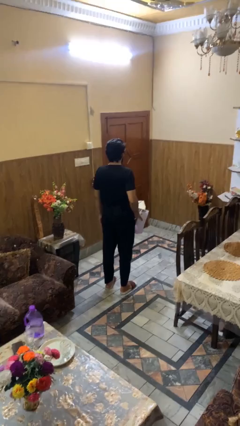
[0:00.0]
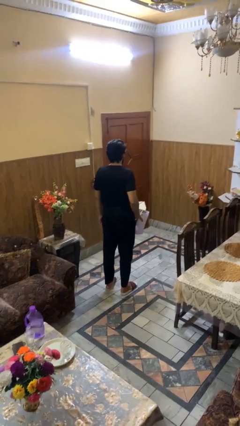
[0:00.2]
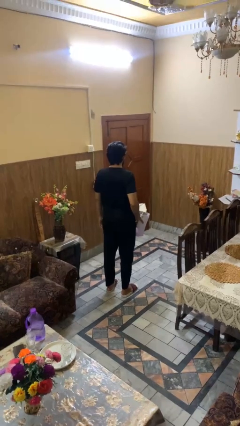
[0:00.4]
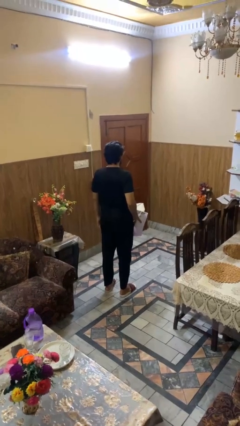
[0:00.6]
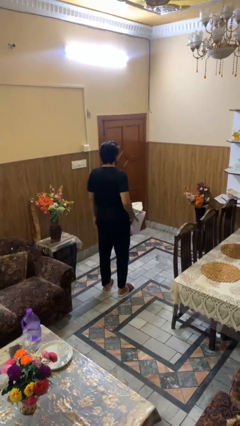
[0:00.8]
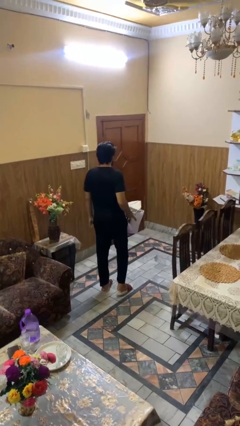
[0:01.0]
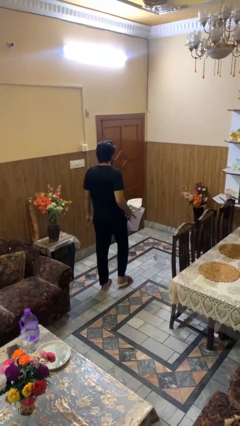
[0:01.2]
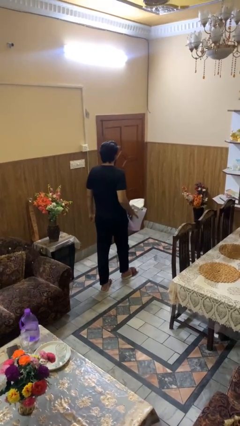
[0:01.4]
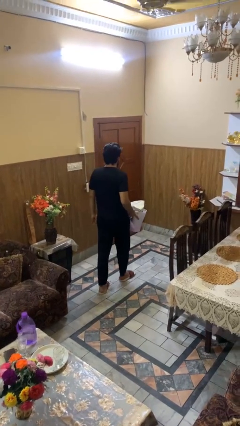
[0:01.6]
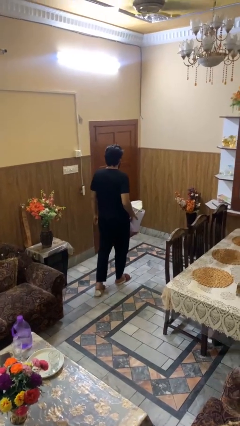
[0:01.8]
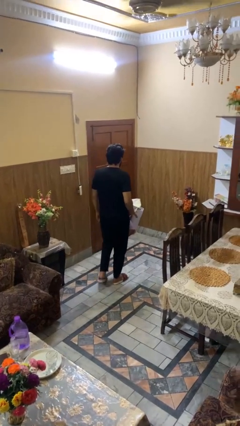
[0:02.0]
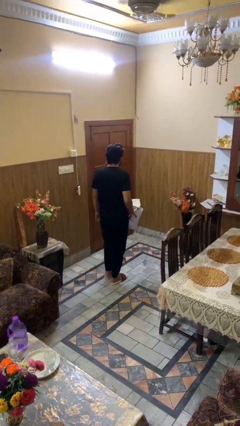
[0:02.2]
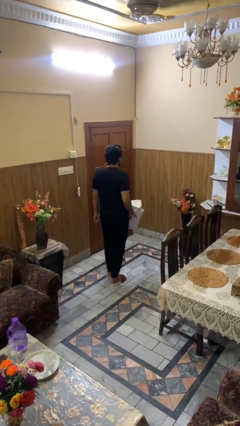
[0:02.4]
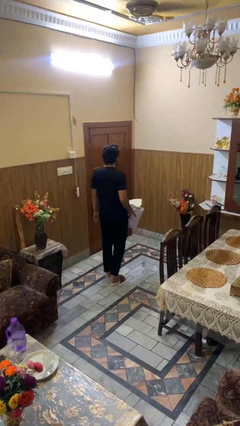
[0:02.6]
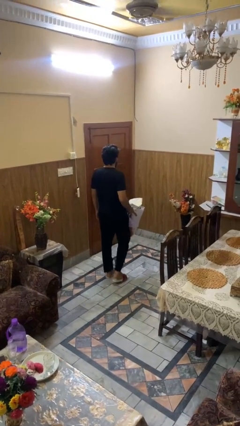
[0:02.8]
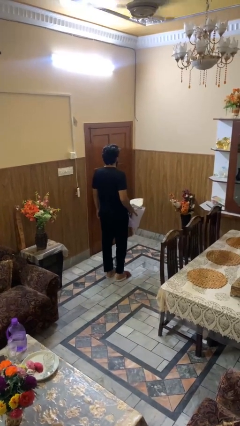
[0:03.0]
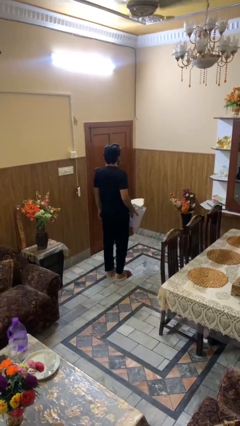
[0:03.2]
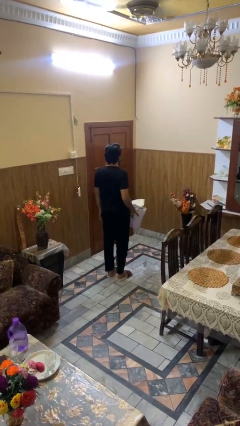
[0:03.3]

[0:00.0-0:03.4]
person carries laundry basket

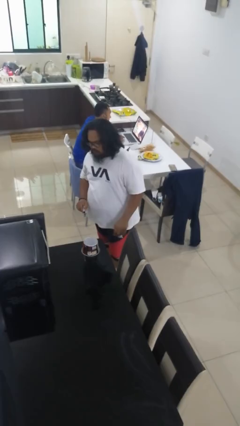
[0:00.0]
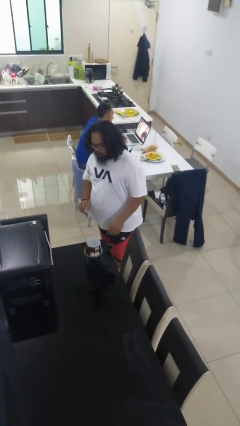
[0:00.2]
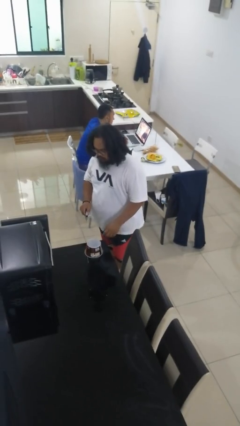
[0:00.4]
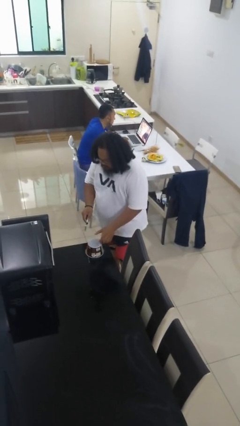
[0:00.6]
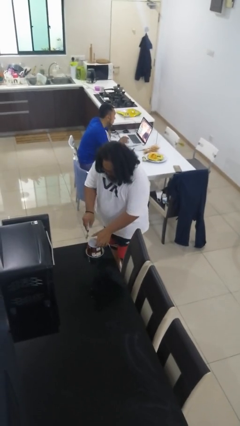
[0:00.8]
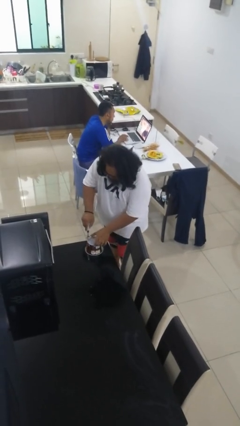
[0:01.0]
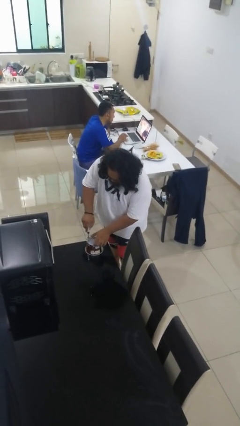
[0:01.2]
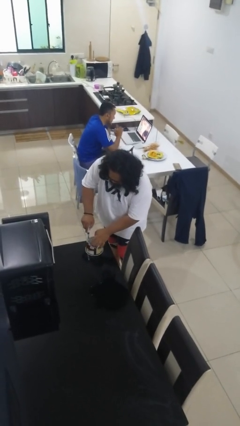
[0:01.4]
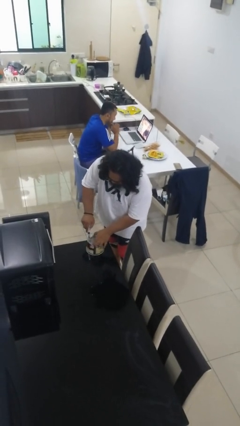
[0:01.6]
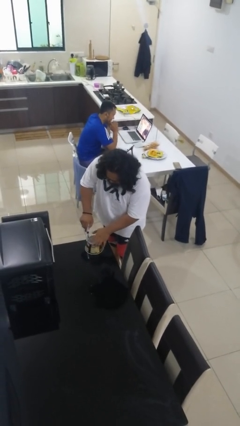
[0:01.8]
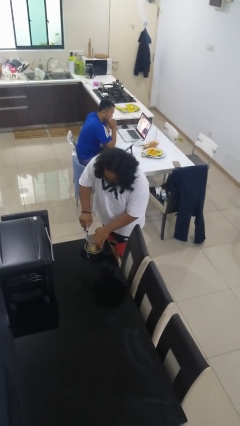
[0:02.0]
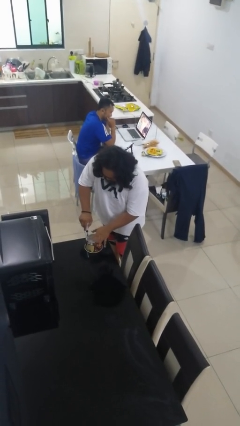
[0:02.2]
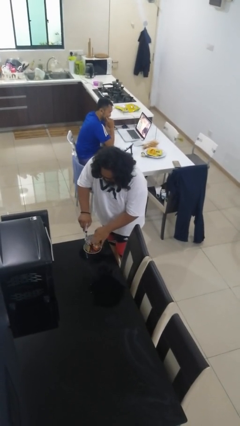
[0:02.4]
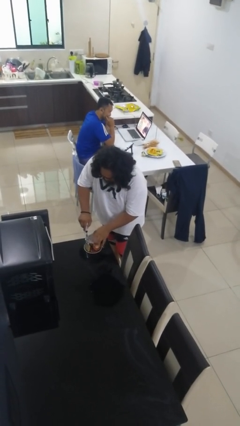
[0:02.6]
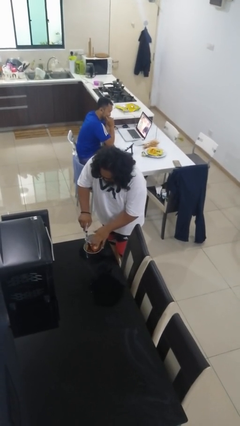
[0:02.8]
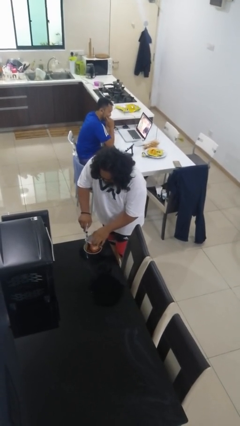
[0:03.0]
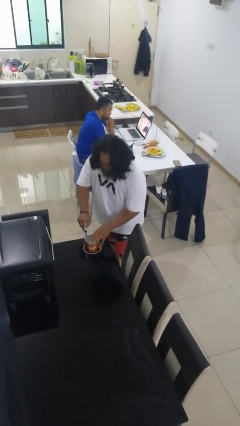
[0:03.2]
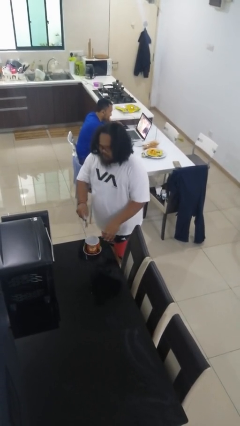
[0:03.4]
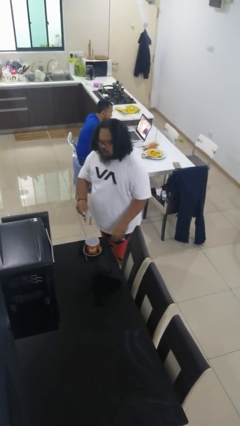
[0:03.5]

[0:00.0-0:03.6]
person opens can with can opener

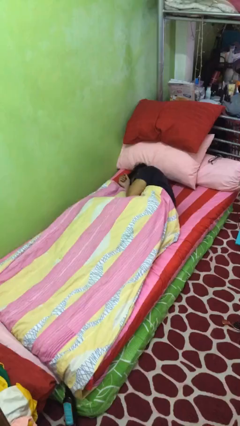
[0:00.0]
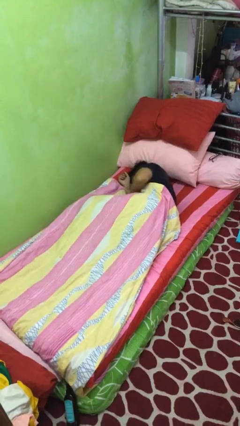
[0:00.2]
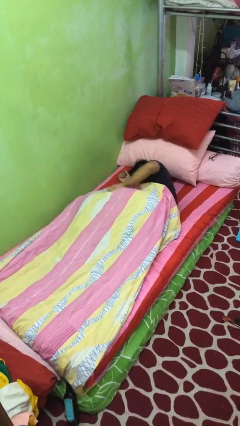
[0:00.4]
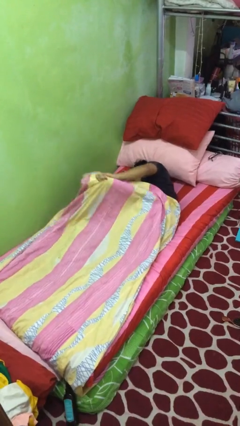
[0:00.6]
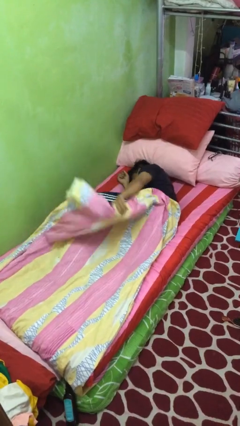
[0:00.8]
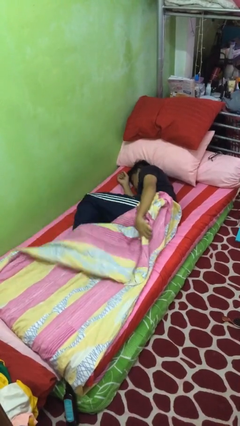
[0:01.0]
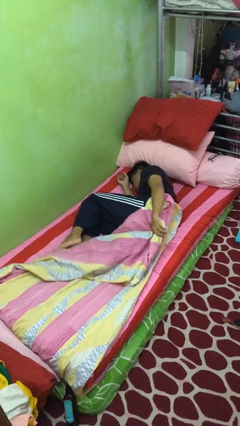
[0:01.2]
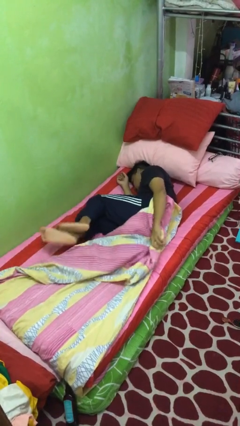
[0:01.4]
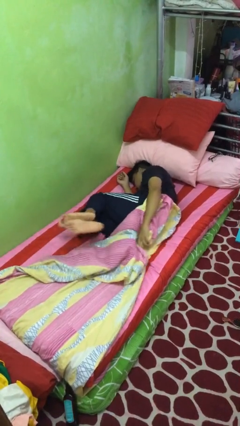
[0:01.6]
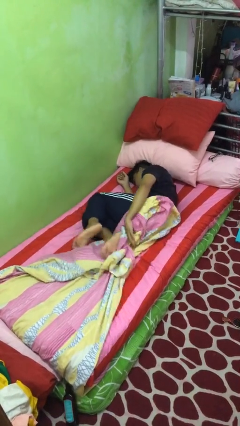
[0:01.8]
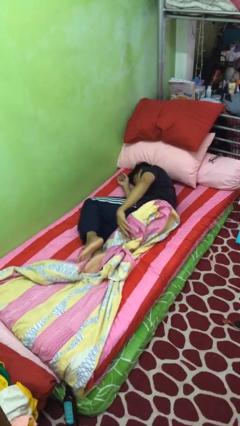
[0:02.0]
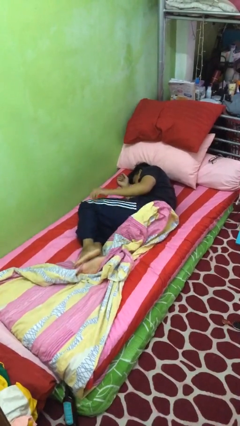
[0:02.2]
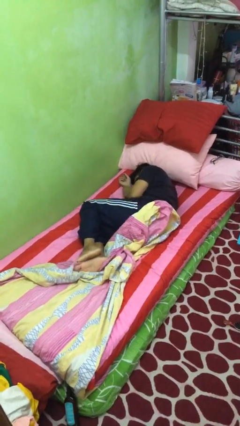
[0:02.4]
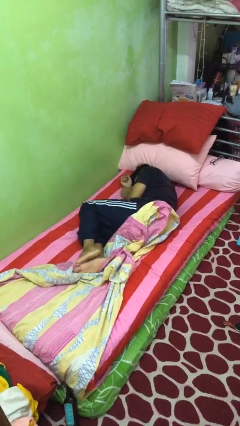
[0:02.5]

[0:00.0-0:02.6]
person uncovers with bedsheets

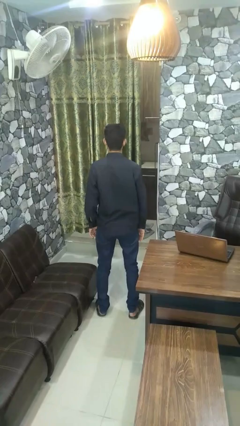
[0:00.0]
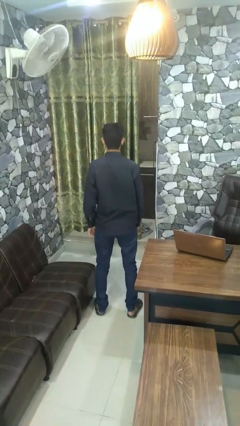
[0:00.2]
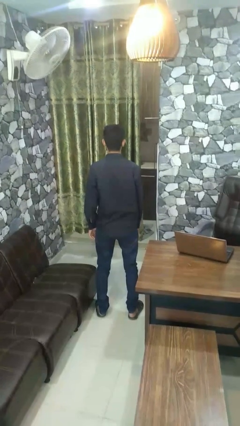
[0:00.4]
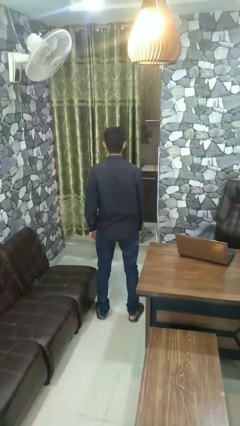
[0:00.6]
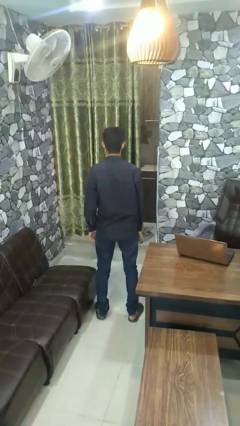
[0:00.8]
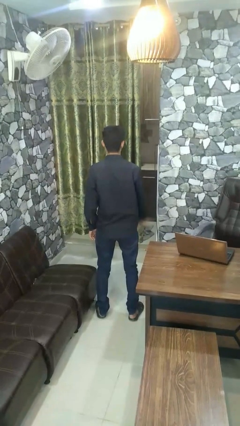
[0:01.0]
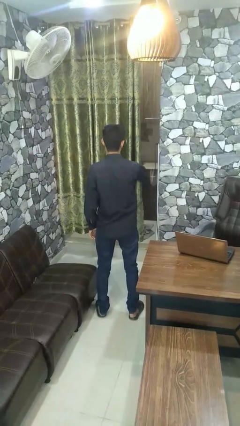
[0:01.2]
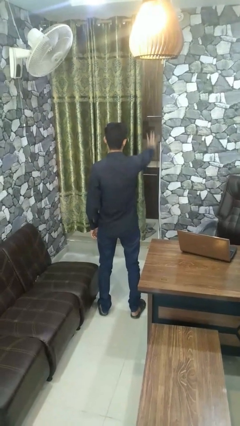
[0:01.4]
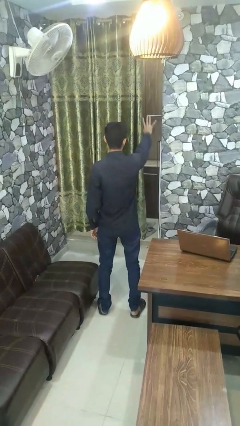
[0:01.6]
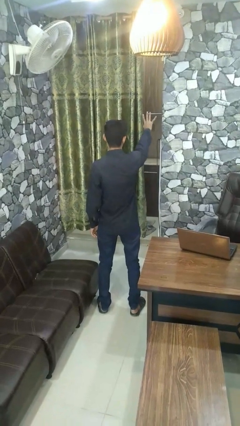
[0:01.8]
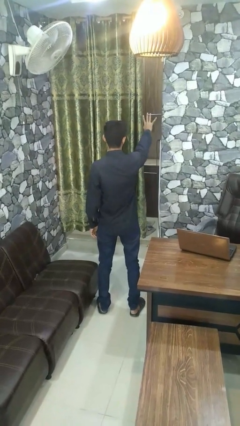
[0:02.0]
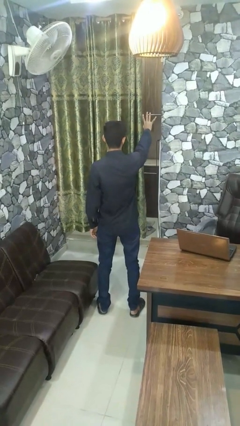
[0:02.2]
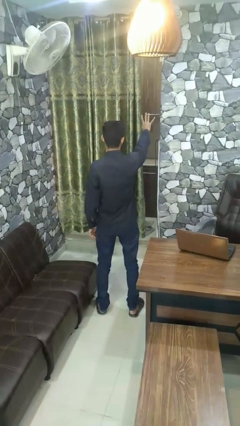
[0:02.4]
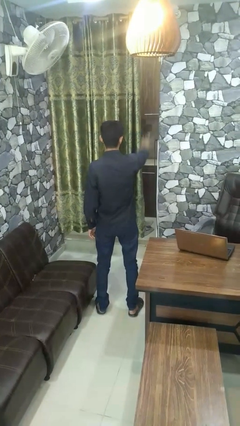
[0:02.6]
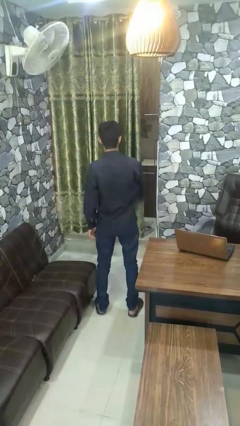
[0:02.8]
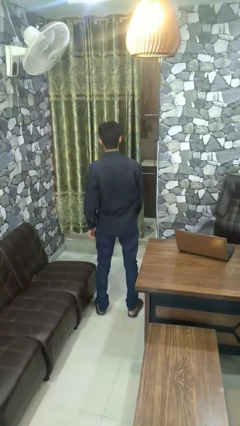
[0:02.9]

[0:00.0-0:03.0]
person gestures number four

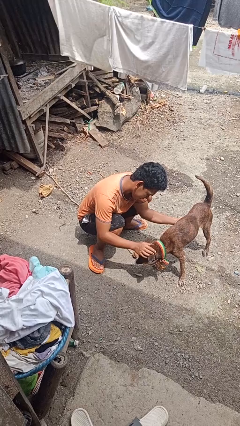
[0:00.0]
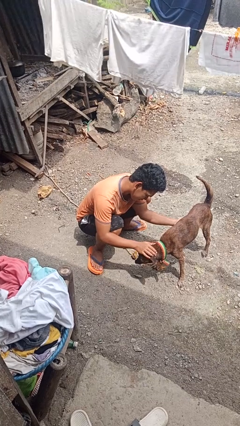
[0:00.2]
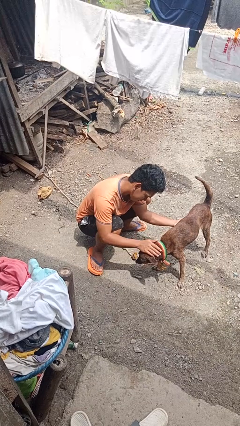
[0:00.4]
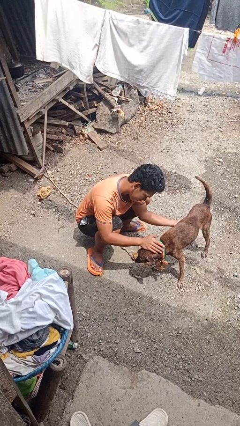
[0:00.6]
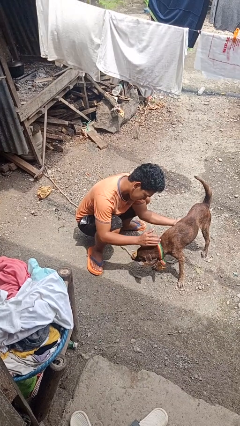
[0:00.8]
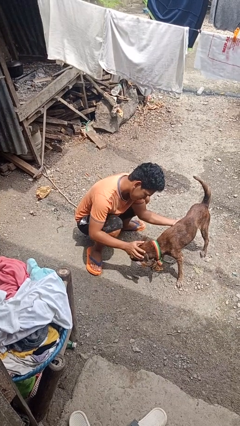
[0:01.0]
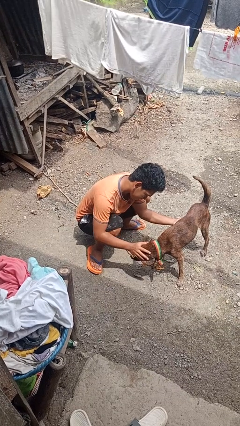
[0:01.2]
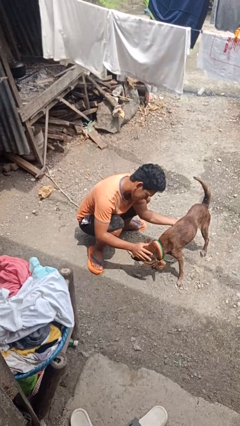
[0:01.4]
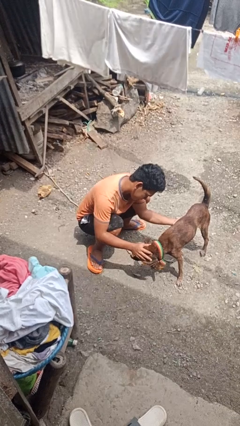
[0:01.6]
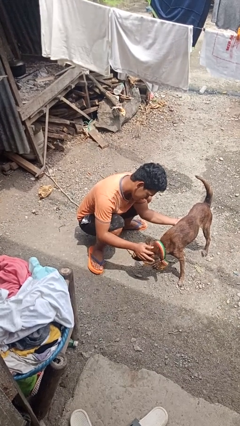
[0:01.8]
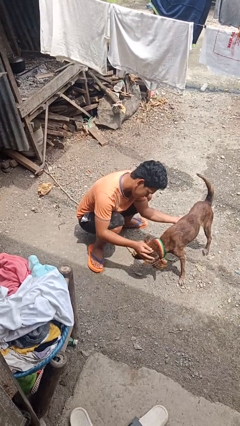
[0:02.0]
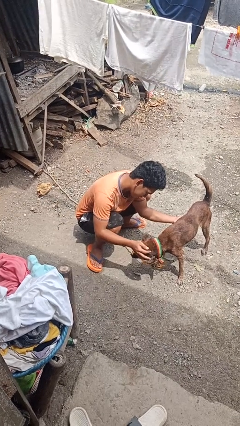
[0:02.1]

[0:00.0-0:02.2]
person pets dog

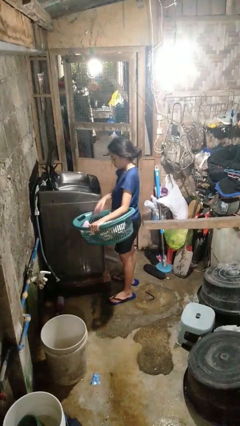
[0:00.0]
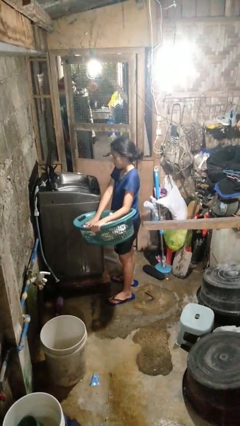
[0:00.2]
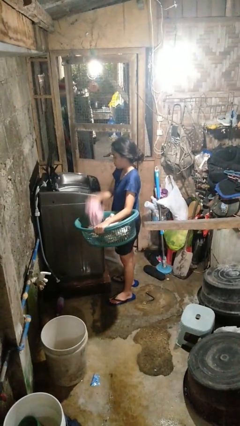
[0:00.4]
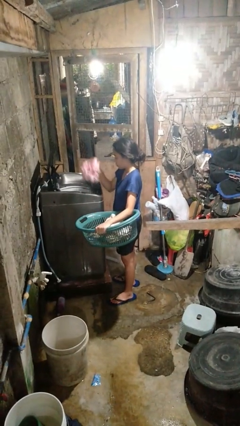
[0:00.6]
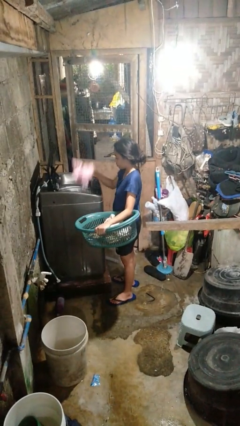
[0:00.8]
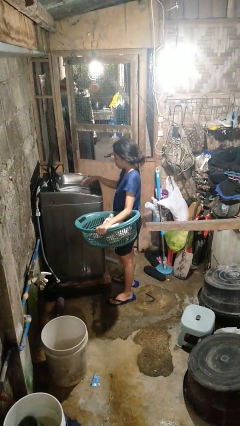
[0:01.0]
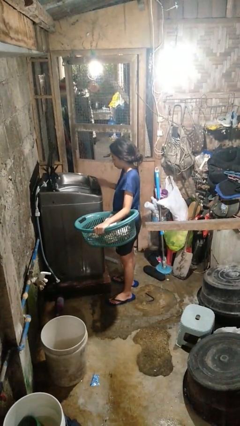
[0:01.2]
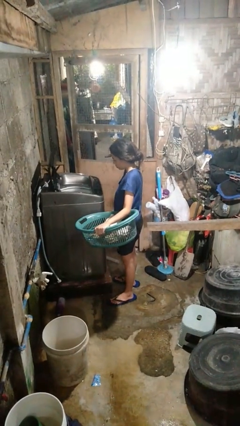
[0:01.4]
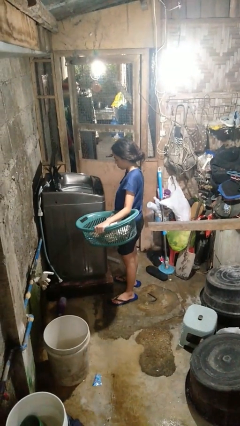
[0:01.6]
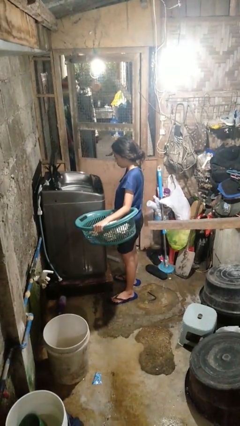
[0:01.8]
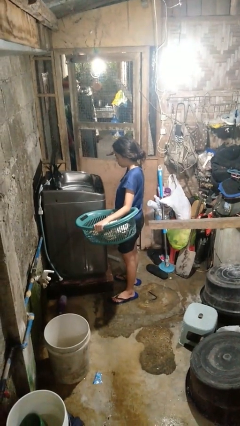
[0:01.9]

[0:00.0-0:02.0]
person loads clotheswasher
